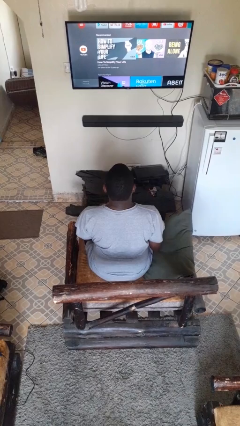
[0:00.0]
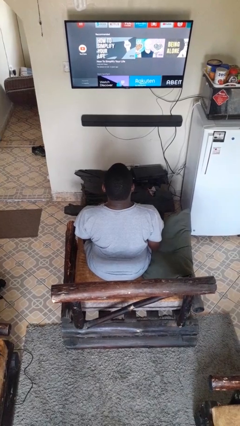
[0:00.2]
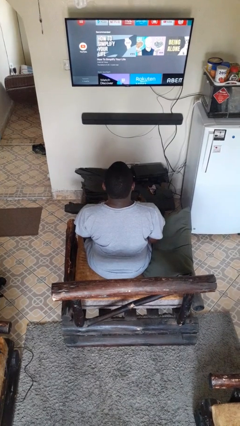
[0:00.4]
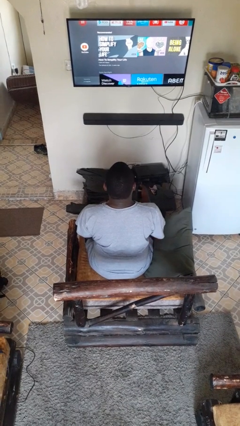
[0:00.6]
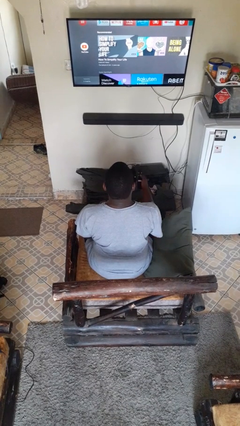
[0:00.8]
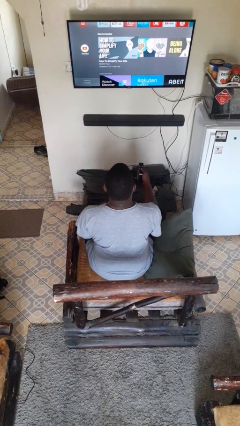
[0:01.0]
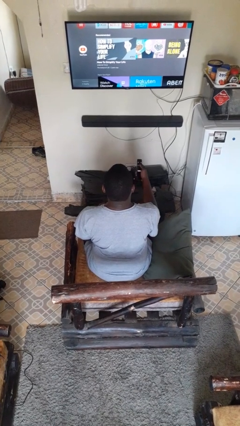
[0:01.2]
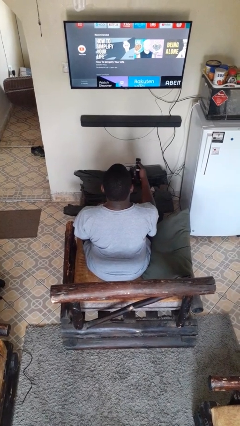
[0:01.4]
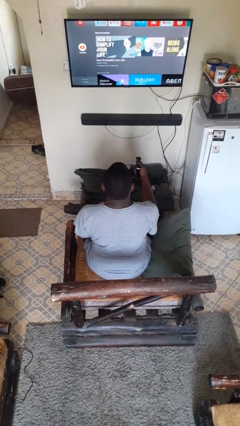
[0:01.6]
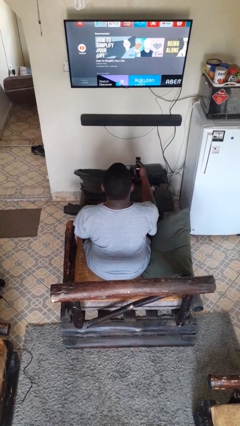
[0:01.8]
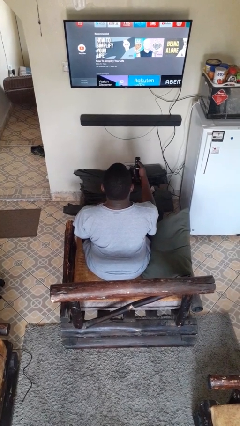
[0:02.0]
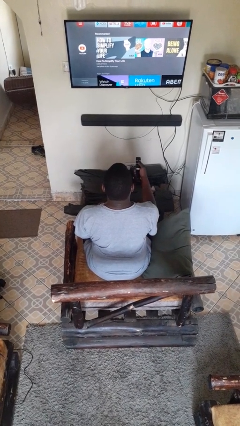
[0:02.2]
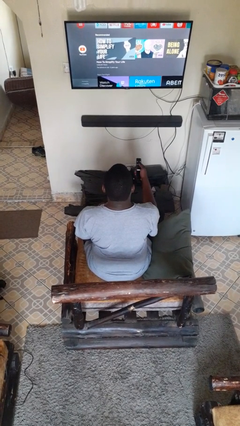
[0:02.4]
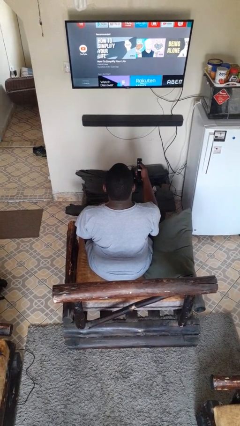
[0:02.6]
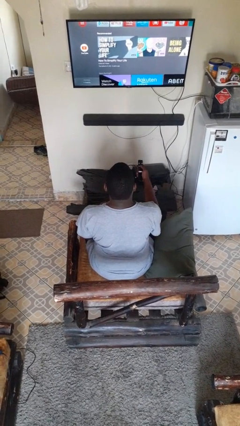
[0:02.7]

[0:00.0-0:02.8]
person uses television remote

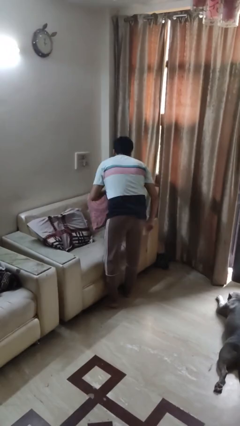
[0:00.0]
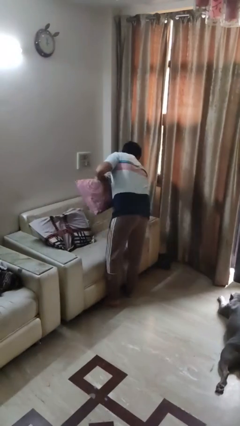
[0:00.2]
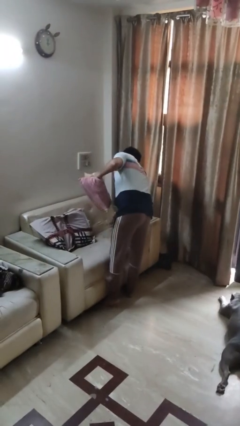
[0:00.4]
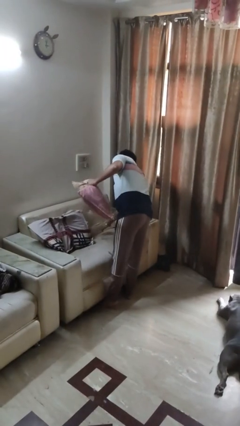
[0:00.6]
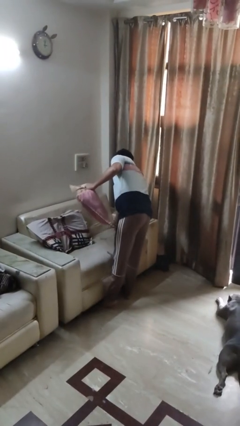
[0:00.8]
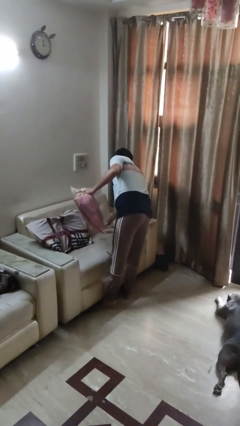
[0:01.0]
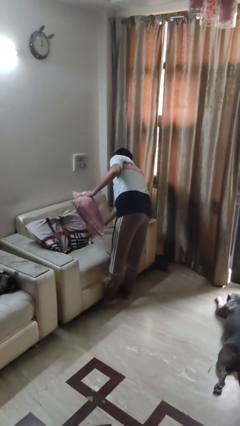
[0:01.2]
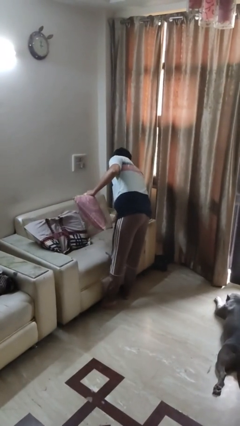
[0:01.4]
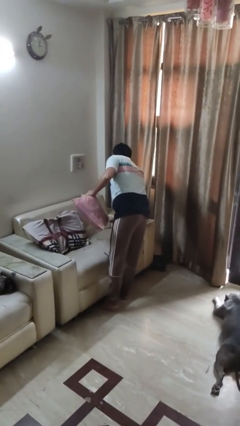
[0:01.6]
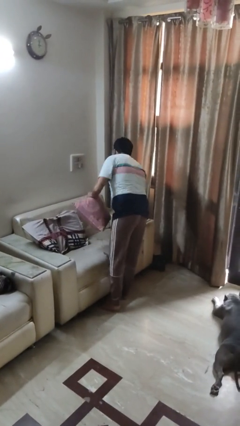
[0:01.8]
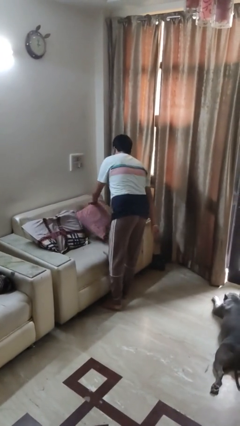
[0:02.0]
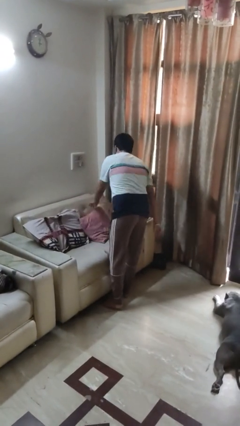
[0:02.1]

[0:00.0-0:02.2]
person searches in couch

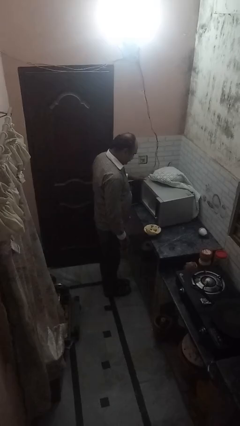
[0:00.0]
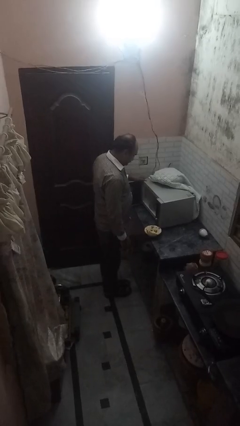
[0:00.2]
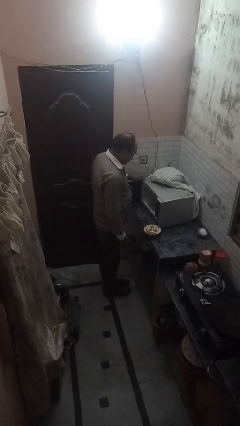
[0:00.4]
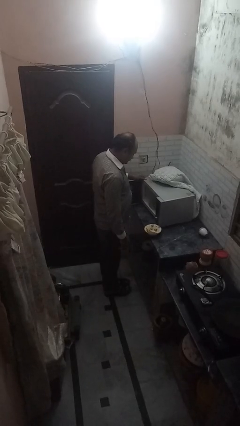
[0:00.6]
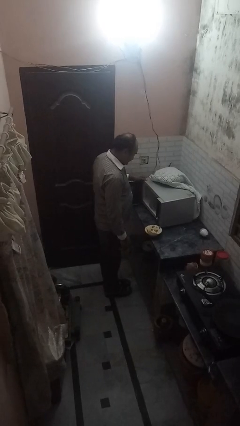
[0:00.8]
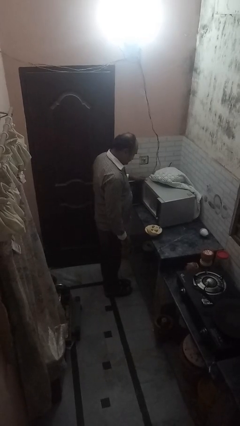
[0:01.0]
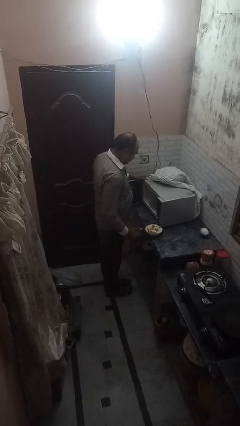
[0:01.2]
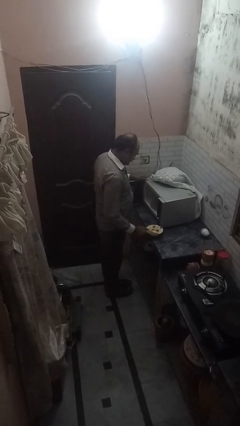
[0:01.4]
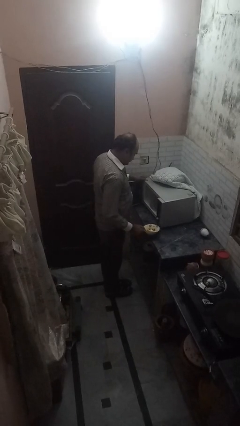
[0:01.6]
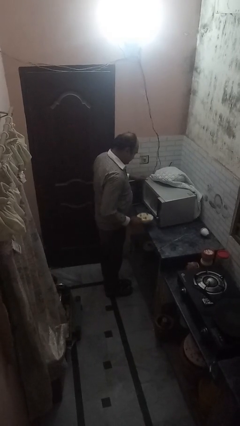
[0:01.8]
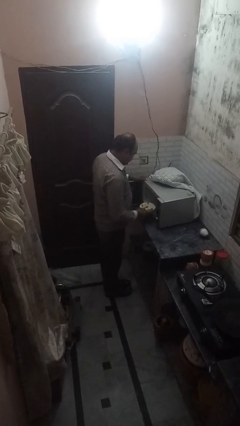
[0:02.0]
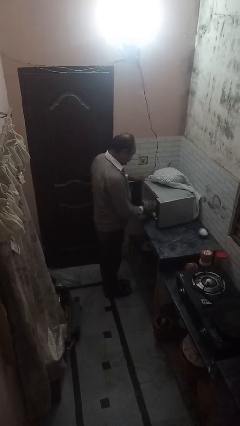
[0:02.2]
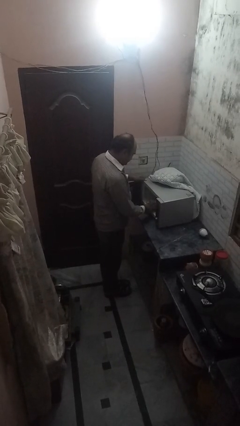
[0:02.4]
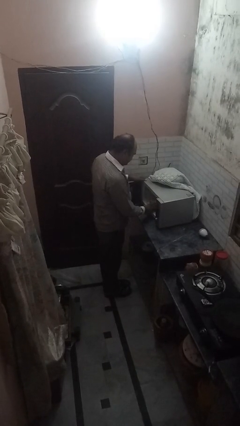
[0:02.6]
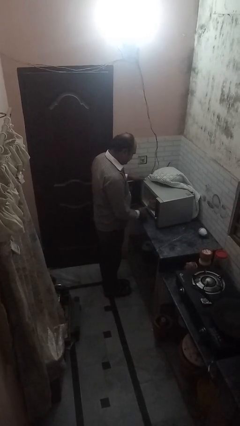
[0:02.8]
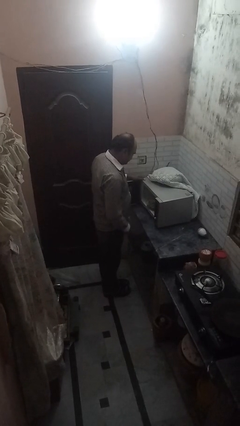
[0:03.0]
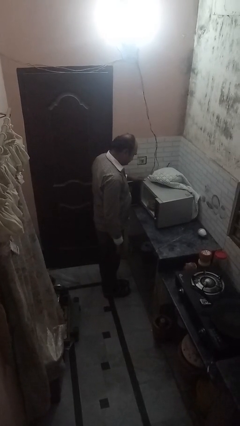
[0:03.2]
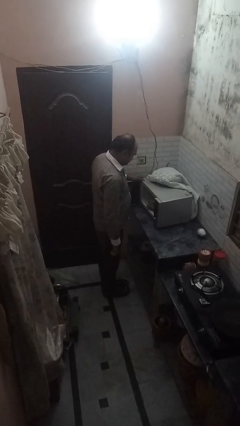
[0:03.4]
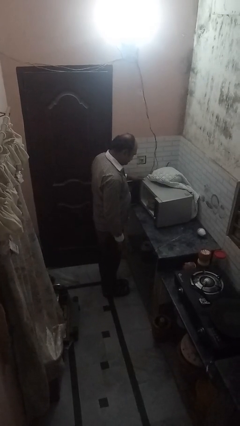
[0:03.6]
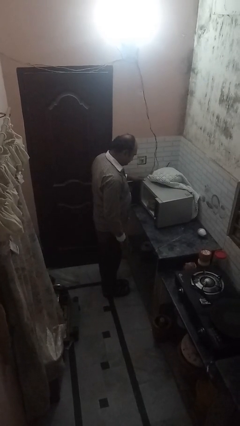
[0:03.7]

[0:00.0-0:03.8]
person puts object into microwave

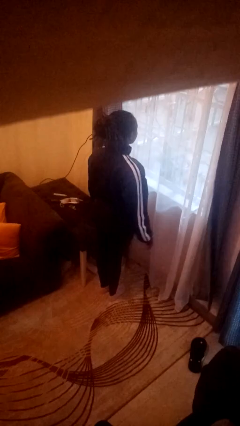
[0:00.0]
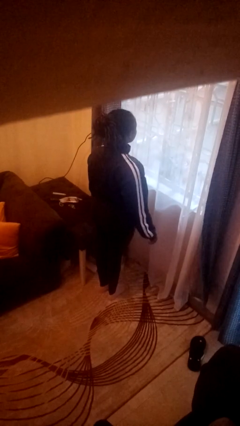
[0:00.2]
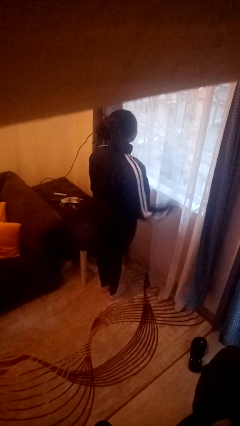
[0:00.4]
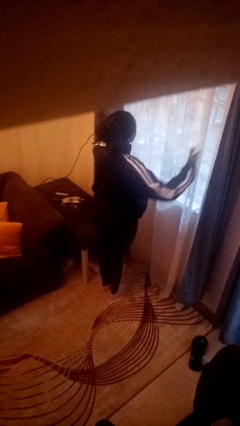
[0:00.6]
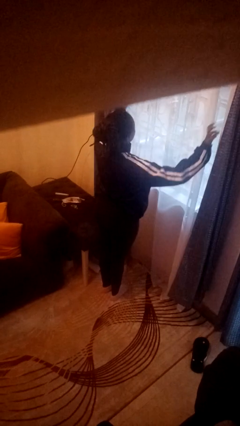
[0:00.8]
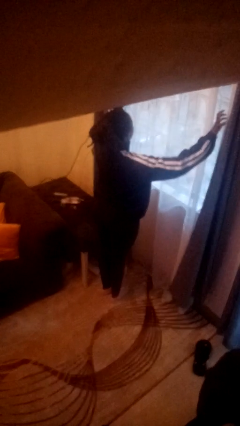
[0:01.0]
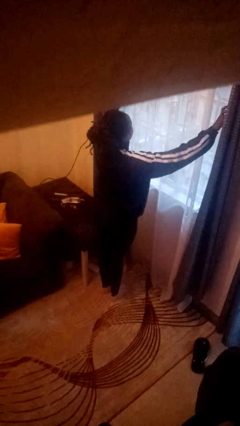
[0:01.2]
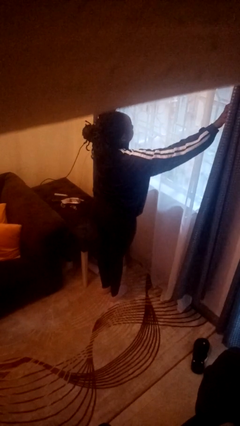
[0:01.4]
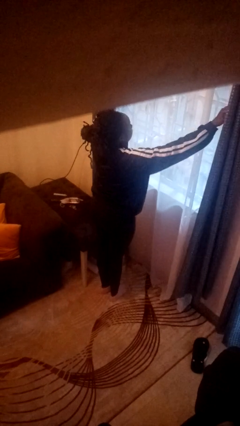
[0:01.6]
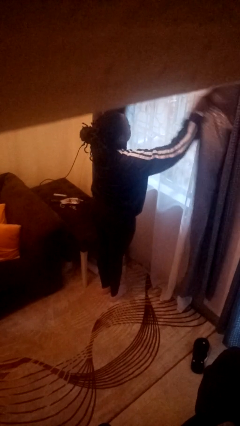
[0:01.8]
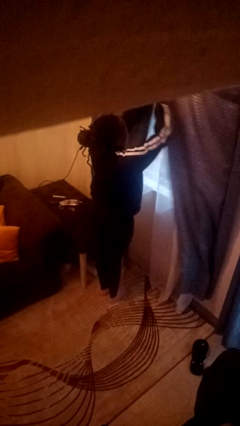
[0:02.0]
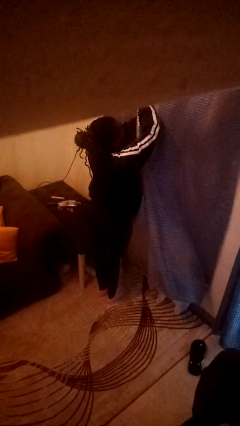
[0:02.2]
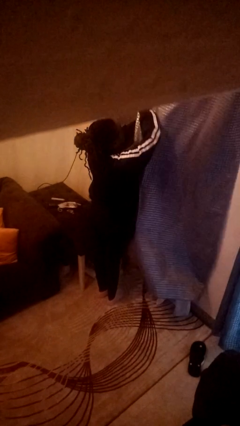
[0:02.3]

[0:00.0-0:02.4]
person closes curtains

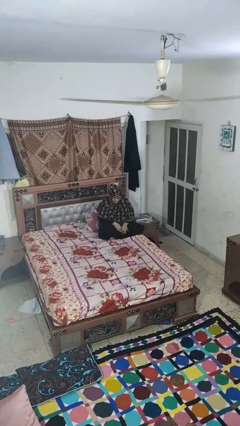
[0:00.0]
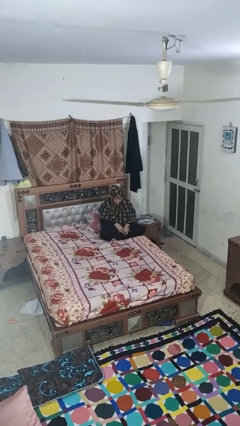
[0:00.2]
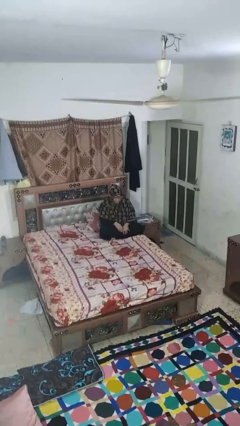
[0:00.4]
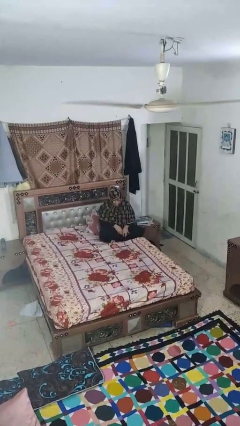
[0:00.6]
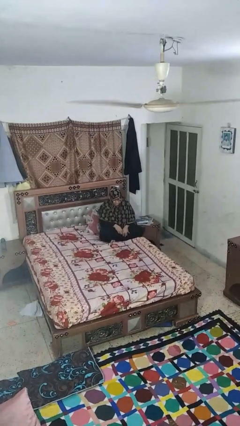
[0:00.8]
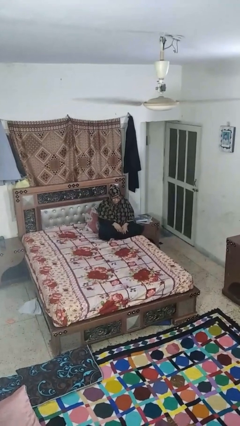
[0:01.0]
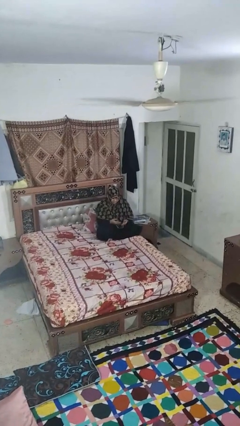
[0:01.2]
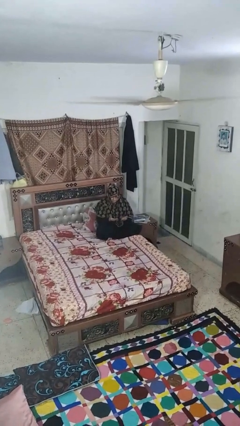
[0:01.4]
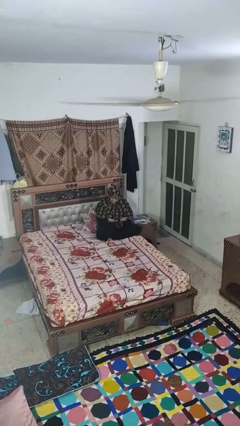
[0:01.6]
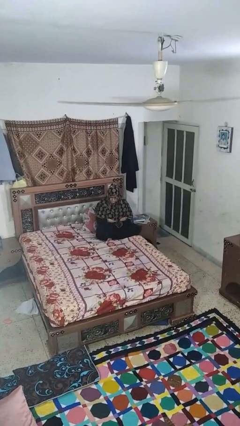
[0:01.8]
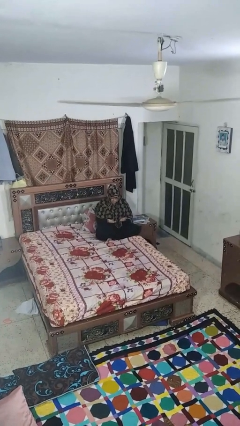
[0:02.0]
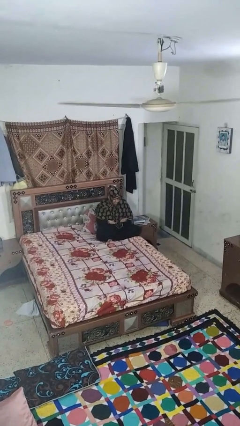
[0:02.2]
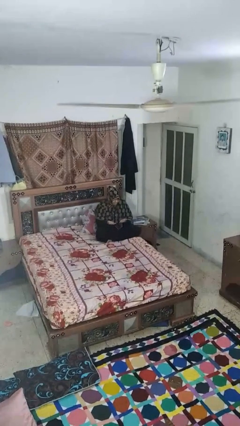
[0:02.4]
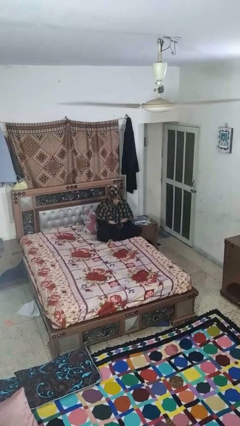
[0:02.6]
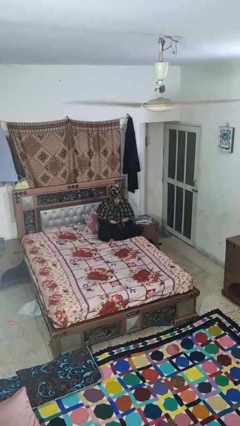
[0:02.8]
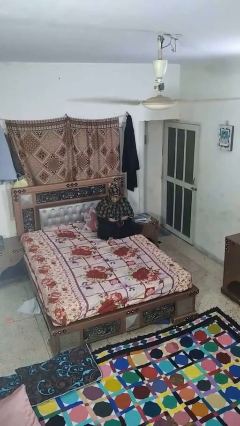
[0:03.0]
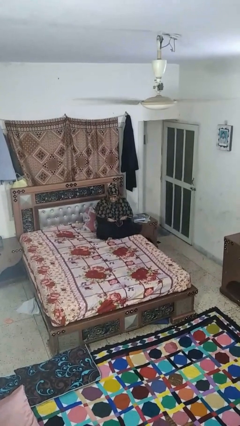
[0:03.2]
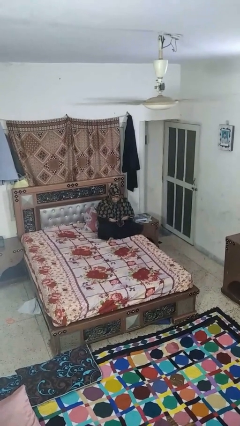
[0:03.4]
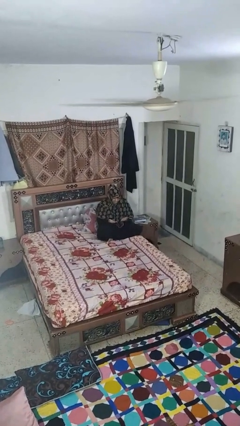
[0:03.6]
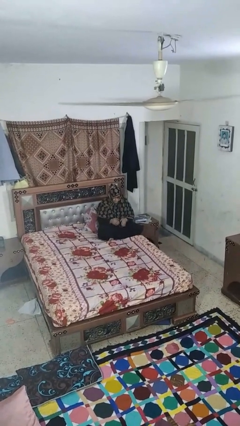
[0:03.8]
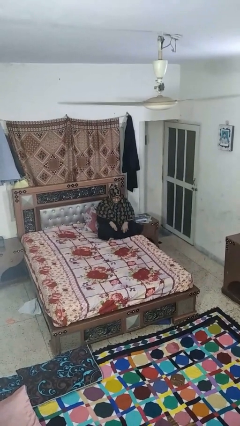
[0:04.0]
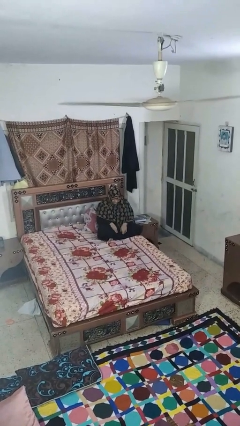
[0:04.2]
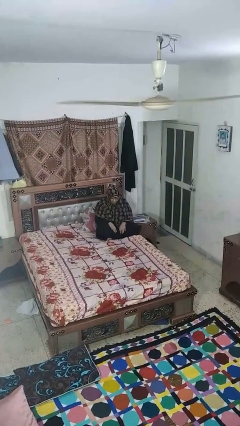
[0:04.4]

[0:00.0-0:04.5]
person looks at hands in lap

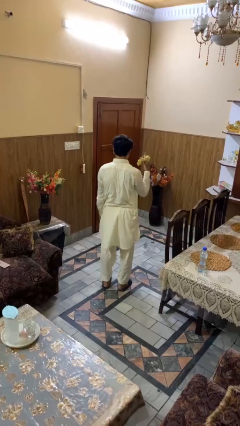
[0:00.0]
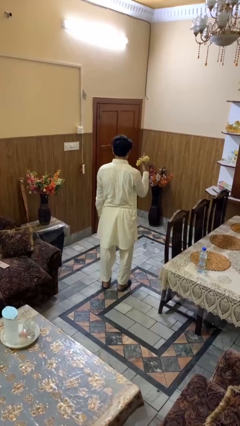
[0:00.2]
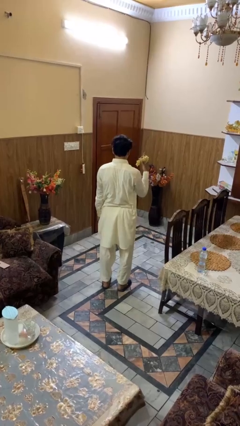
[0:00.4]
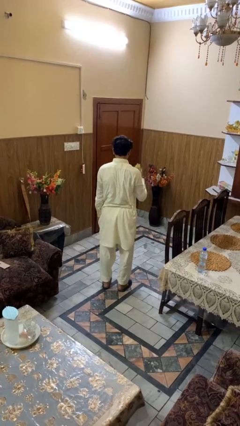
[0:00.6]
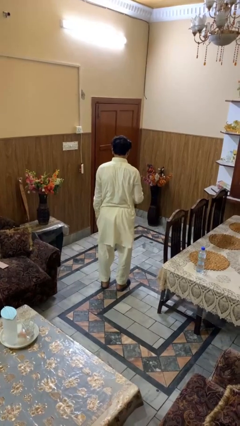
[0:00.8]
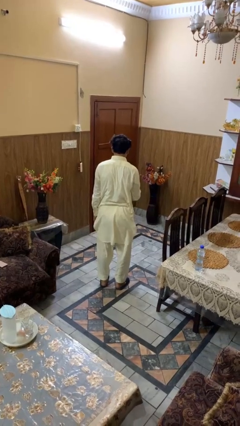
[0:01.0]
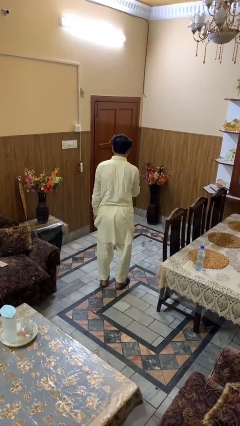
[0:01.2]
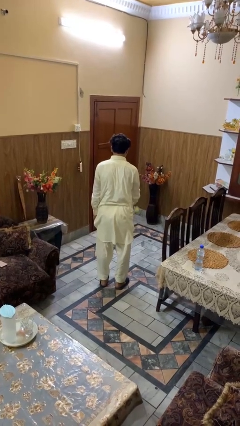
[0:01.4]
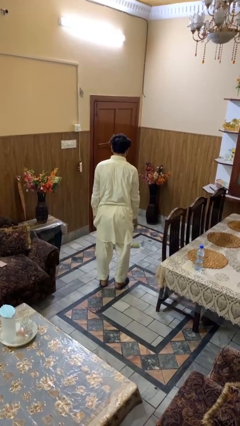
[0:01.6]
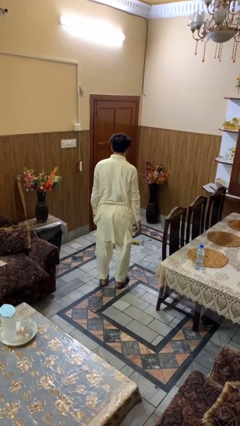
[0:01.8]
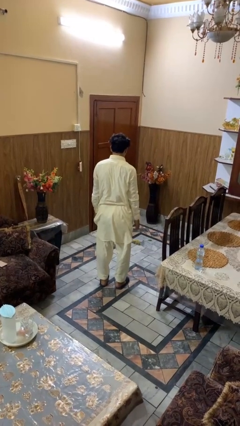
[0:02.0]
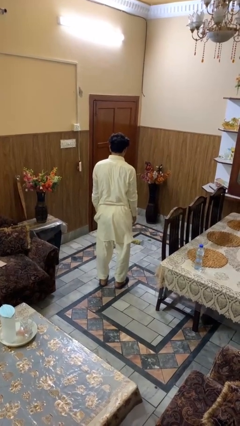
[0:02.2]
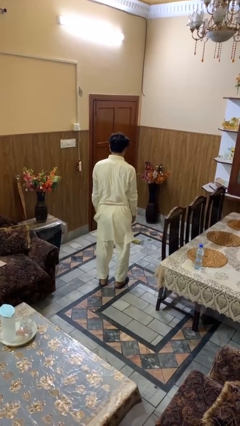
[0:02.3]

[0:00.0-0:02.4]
person throws object to ground
